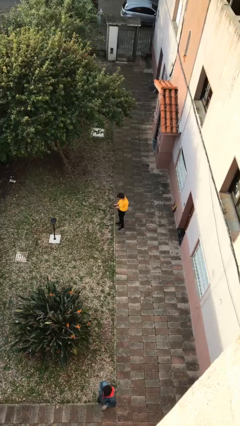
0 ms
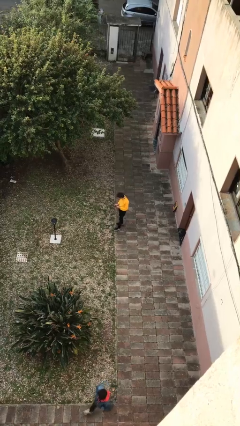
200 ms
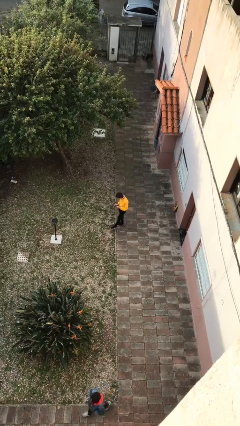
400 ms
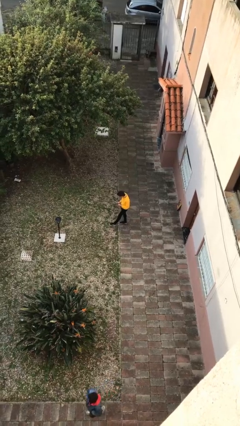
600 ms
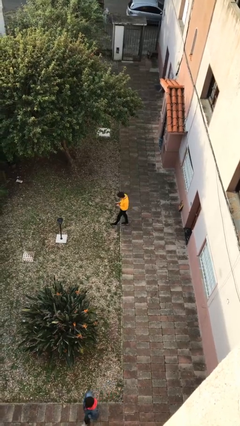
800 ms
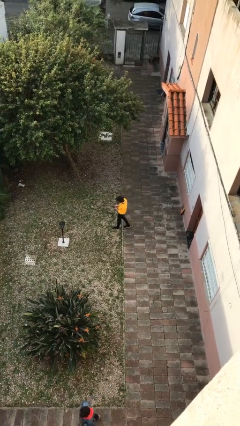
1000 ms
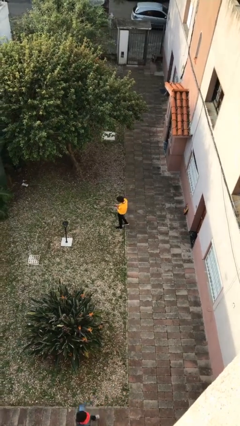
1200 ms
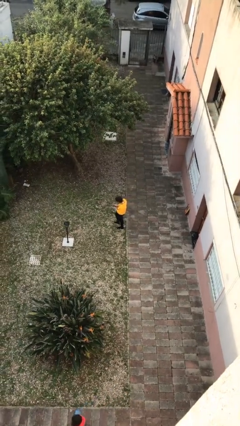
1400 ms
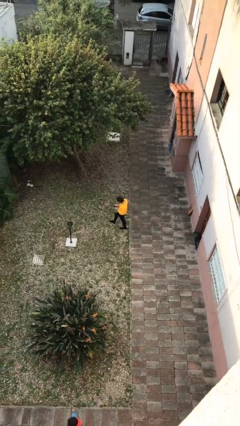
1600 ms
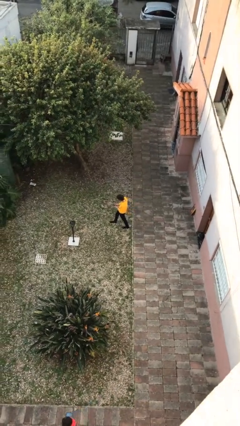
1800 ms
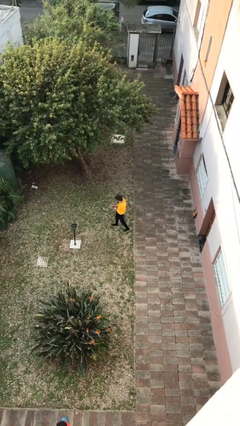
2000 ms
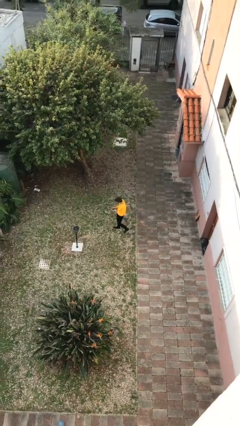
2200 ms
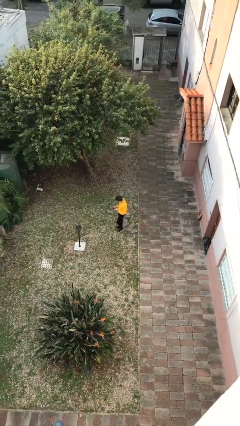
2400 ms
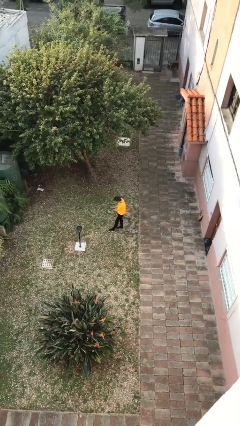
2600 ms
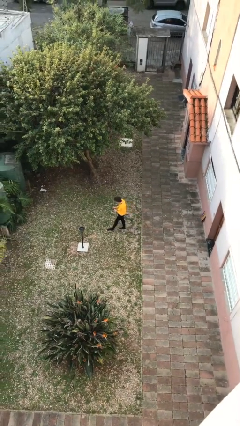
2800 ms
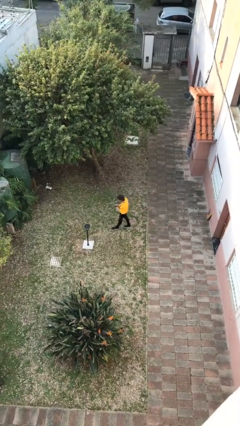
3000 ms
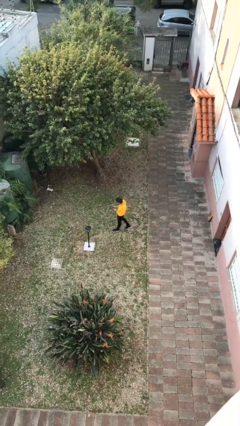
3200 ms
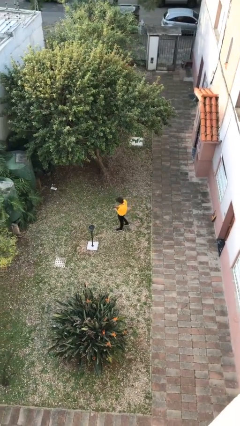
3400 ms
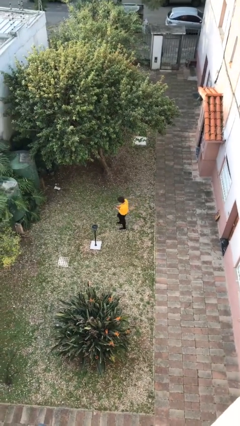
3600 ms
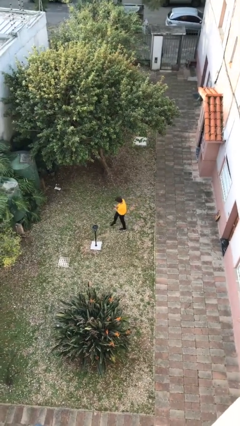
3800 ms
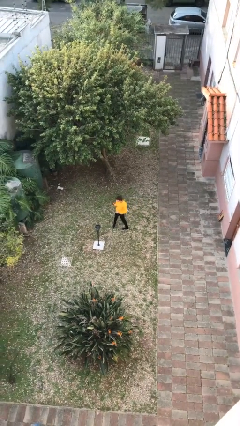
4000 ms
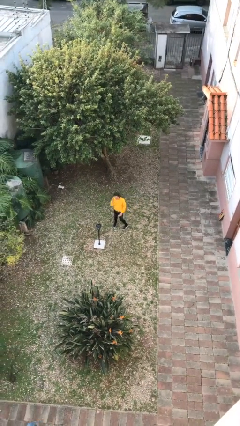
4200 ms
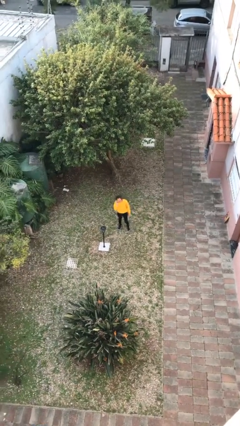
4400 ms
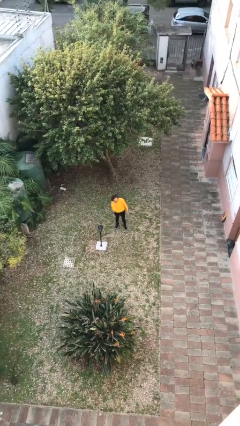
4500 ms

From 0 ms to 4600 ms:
person texts on phone

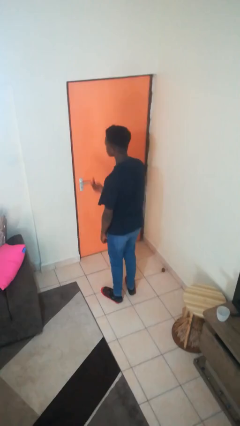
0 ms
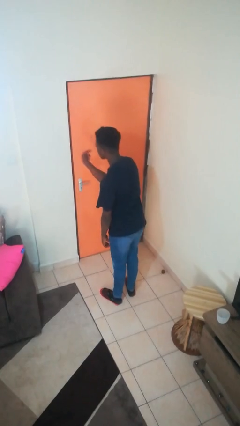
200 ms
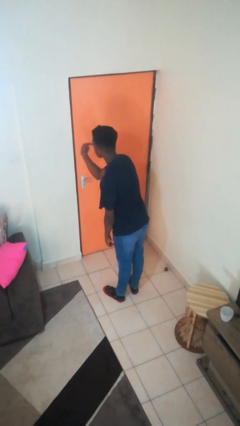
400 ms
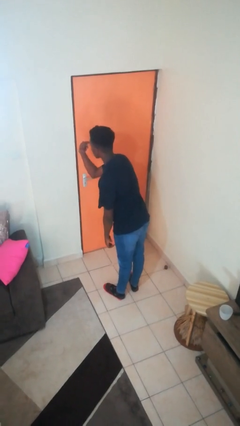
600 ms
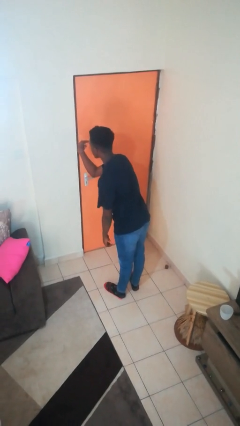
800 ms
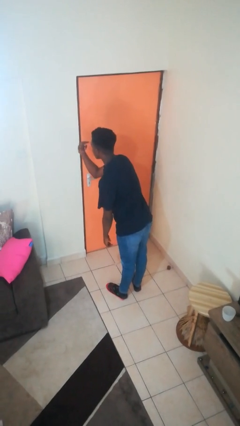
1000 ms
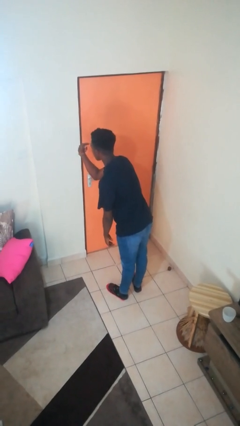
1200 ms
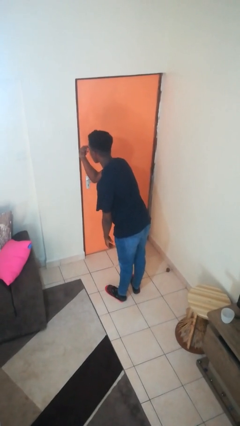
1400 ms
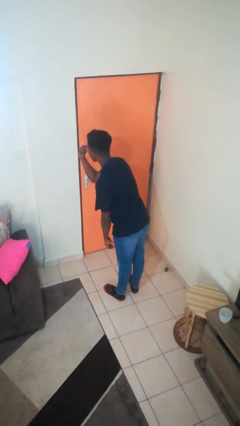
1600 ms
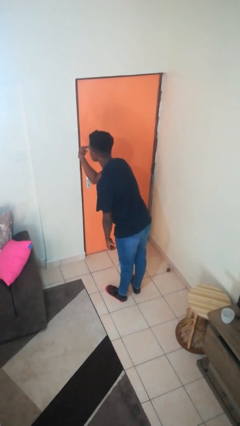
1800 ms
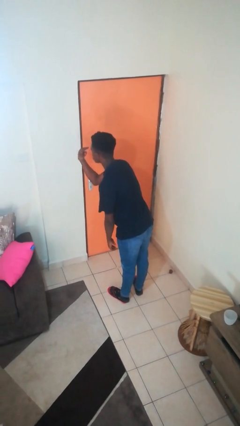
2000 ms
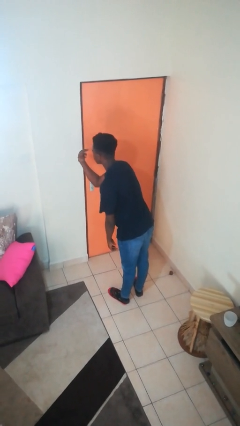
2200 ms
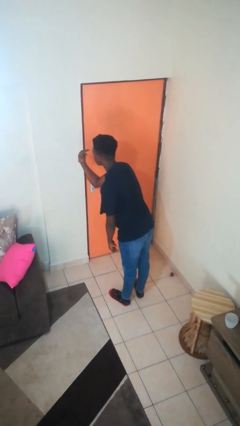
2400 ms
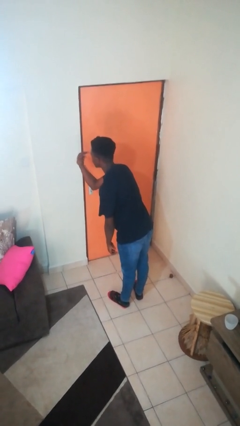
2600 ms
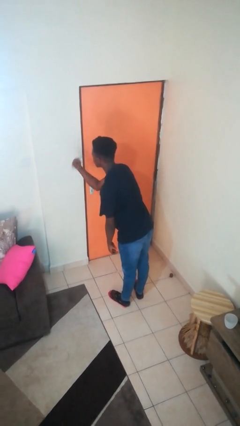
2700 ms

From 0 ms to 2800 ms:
person gestures watch closely

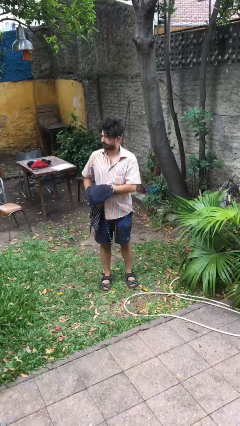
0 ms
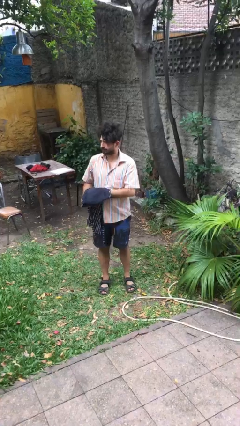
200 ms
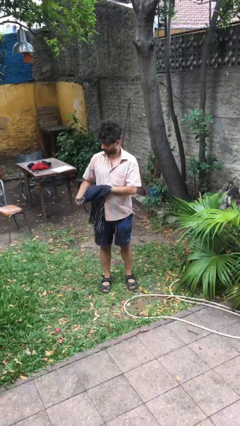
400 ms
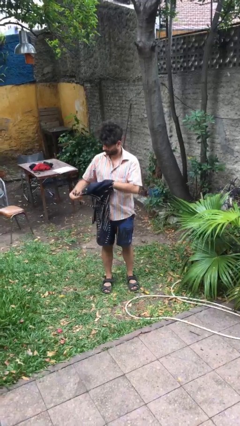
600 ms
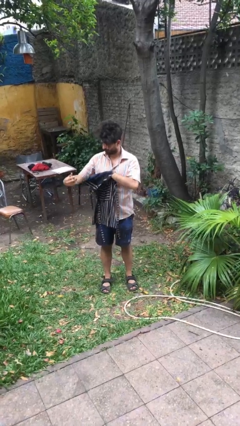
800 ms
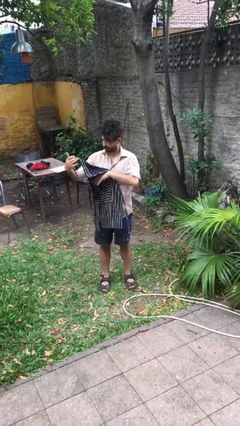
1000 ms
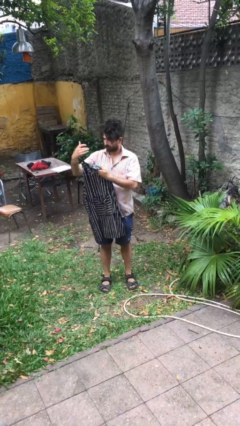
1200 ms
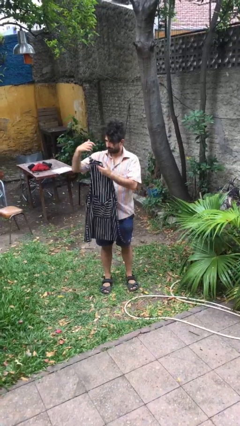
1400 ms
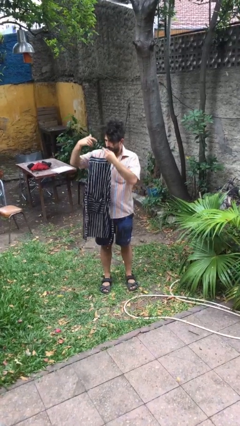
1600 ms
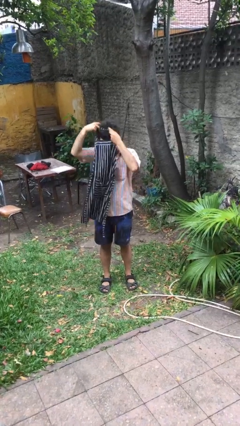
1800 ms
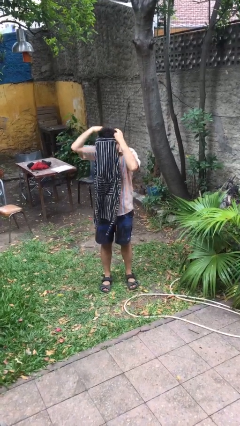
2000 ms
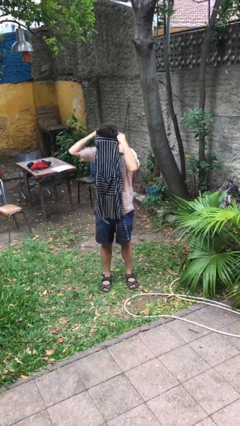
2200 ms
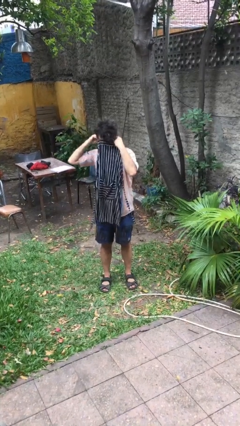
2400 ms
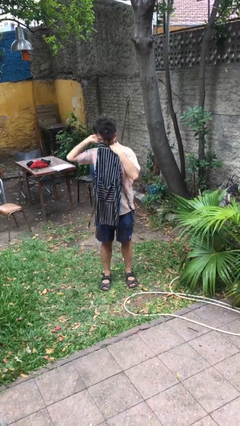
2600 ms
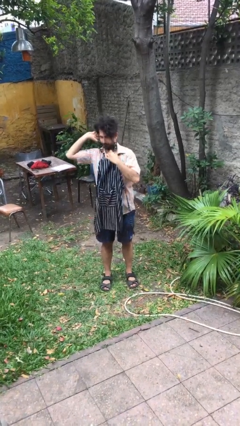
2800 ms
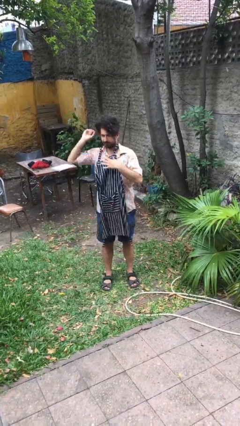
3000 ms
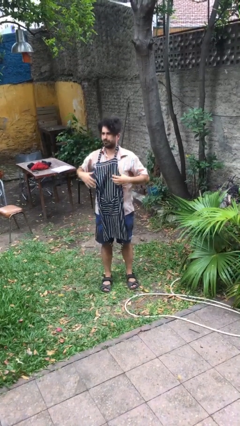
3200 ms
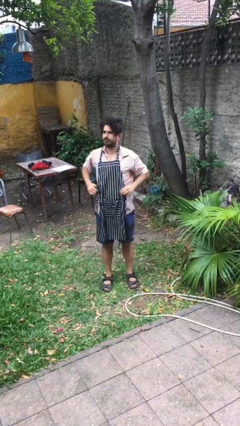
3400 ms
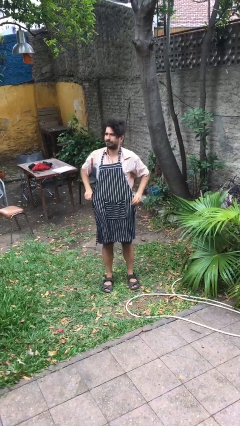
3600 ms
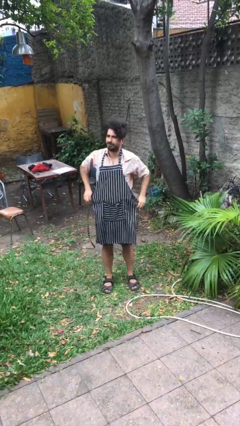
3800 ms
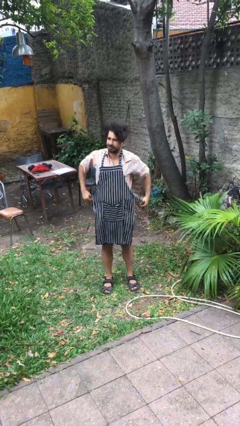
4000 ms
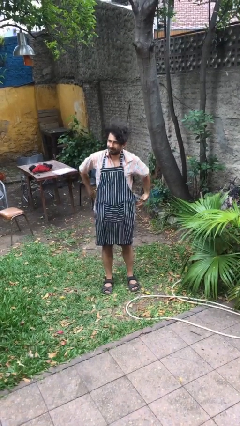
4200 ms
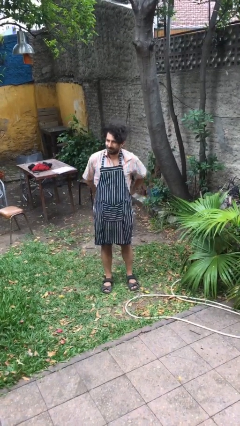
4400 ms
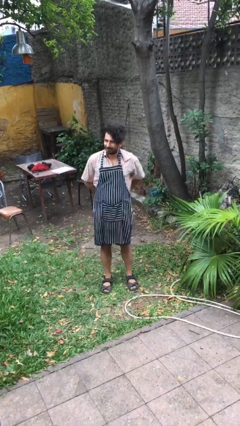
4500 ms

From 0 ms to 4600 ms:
person puts on apron

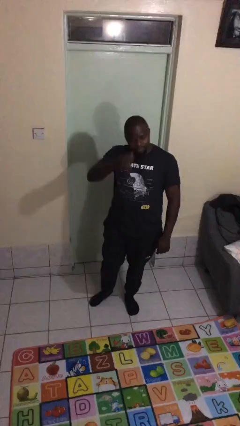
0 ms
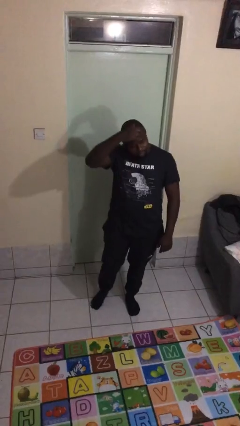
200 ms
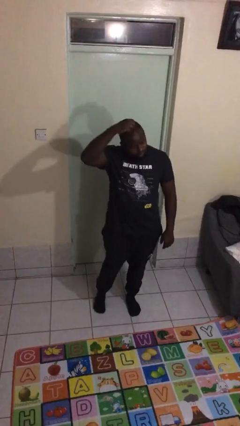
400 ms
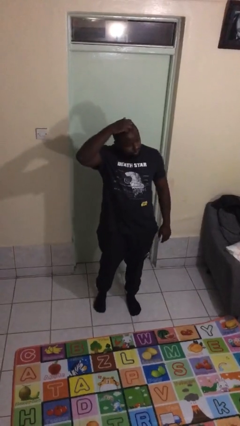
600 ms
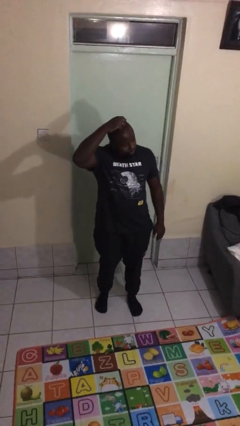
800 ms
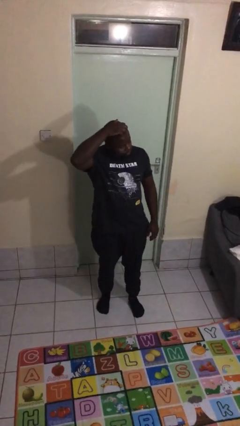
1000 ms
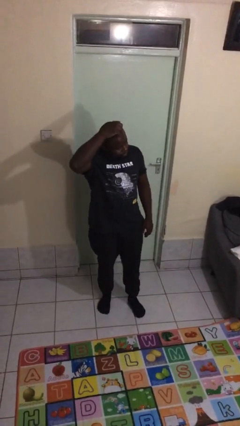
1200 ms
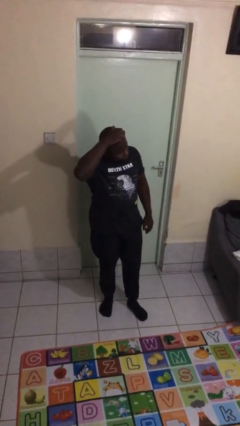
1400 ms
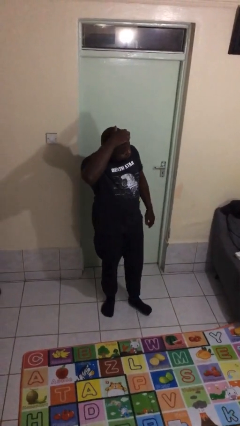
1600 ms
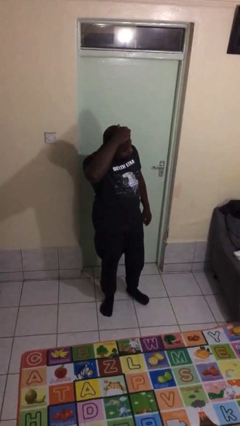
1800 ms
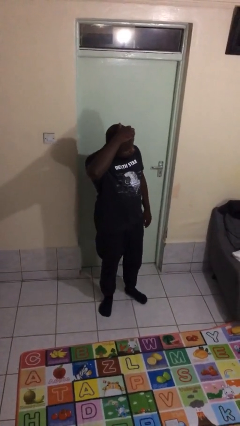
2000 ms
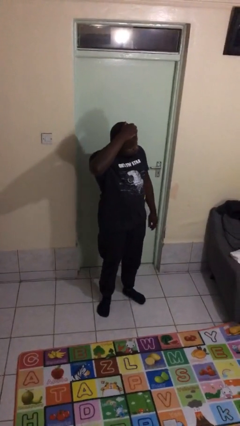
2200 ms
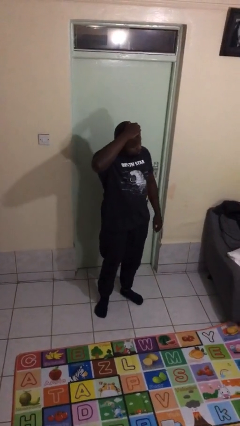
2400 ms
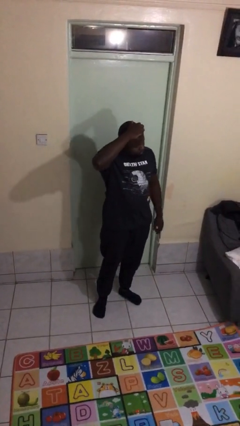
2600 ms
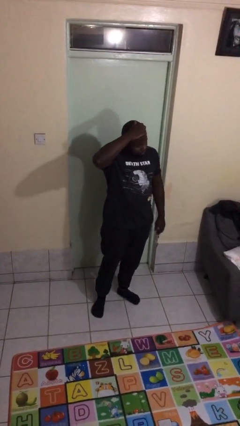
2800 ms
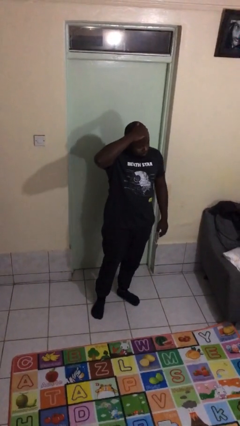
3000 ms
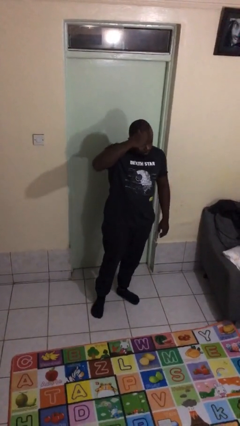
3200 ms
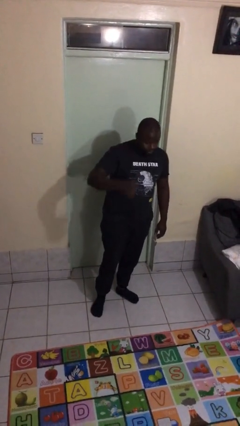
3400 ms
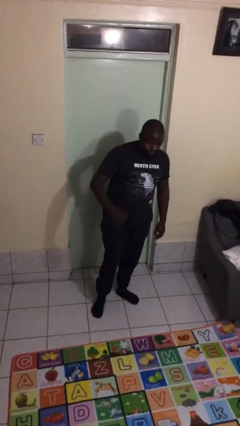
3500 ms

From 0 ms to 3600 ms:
person scratches face

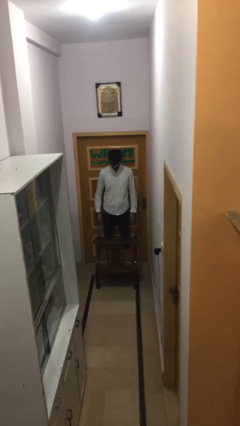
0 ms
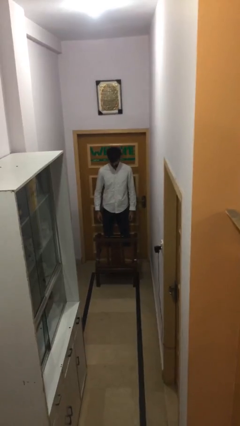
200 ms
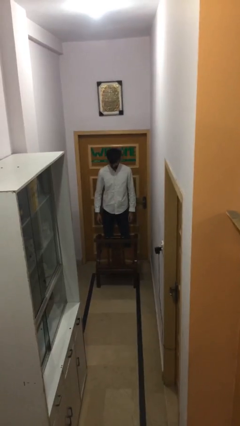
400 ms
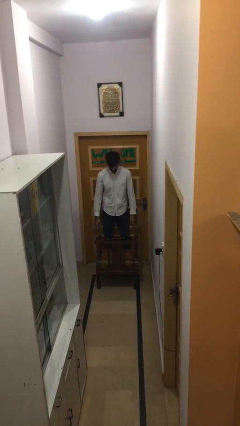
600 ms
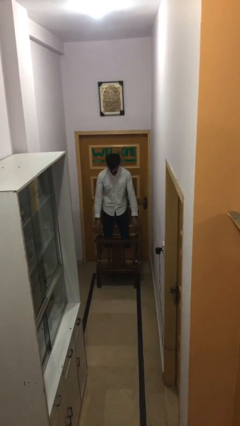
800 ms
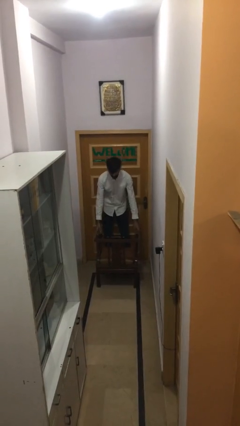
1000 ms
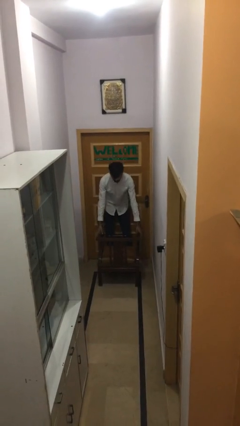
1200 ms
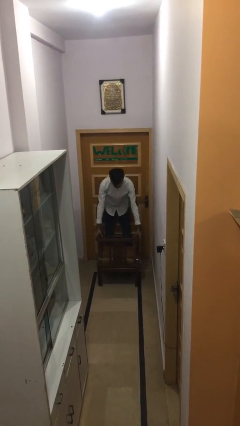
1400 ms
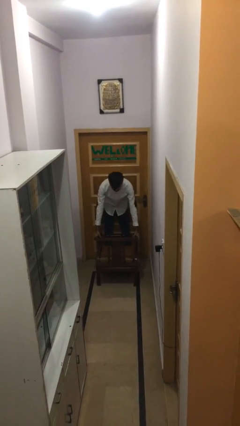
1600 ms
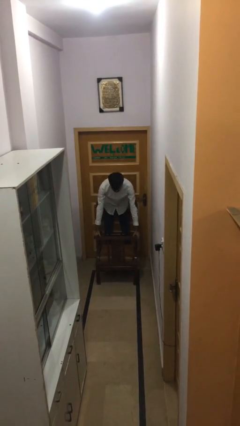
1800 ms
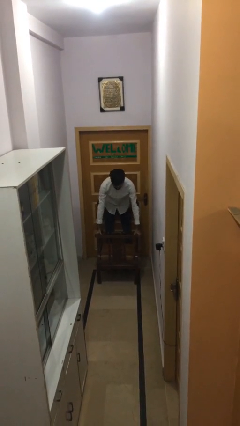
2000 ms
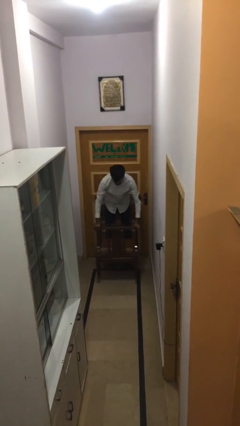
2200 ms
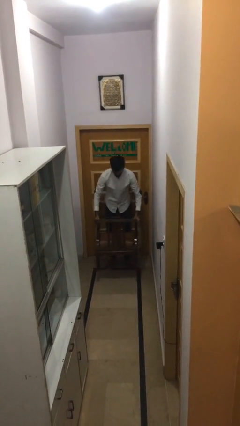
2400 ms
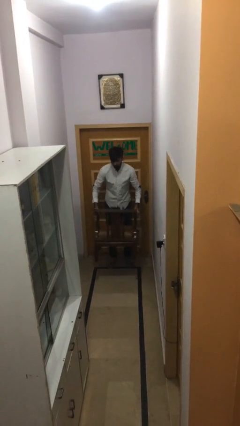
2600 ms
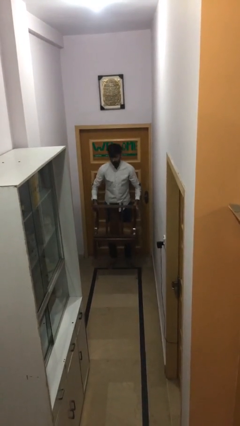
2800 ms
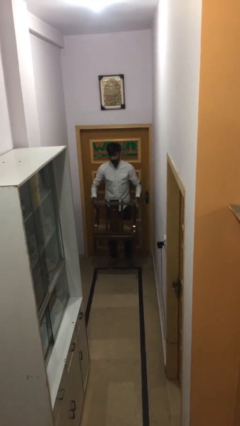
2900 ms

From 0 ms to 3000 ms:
person picks up object from floor
